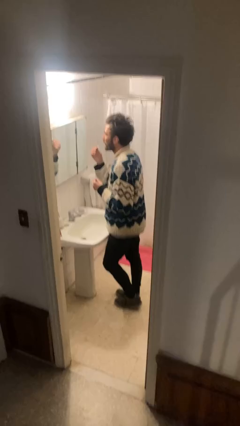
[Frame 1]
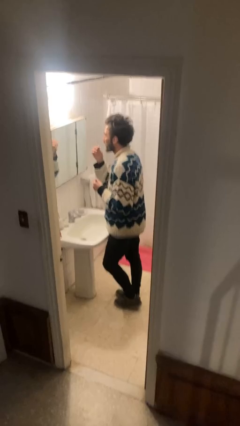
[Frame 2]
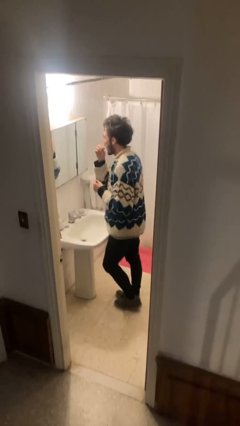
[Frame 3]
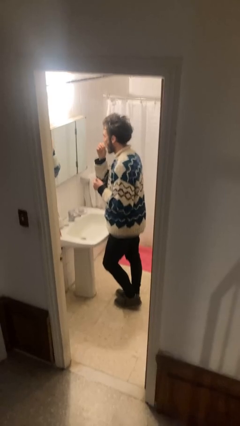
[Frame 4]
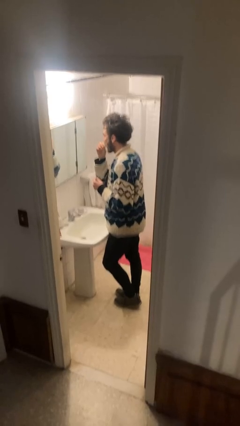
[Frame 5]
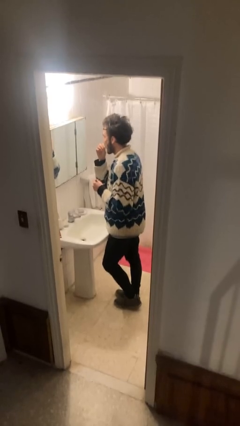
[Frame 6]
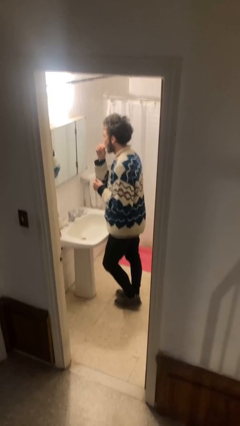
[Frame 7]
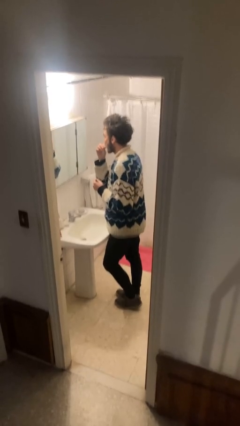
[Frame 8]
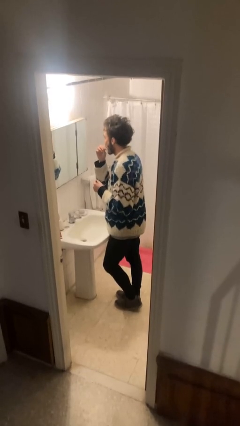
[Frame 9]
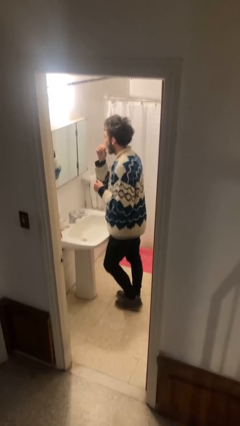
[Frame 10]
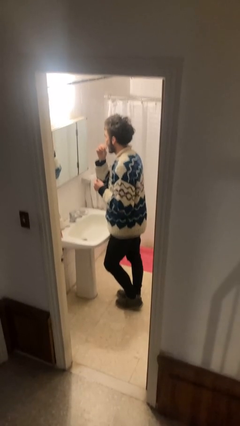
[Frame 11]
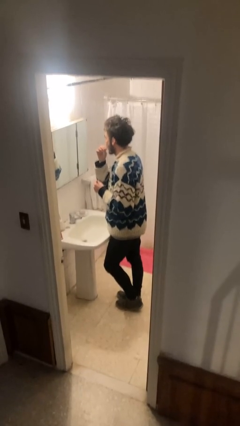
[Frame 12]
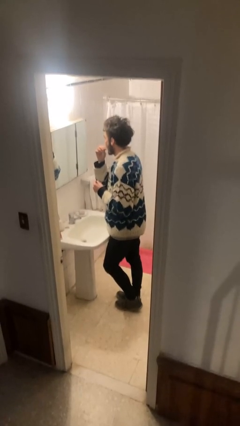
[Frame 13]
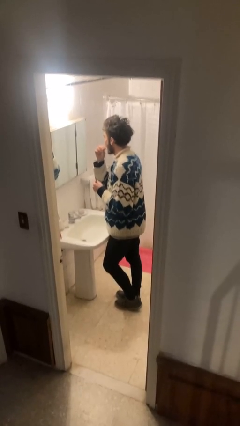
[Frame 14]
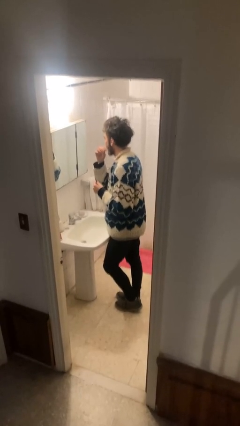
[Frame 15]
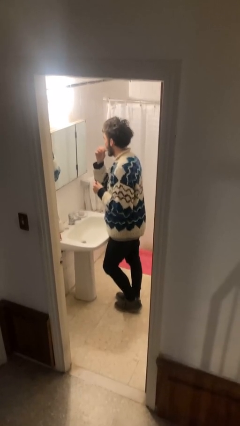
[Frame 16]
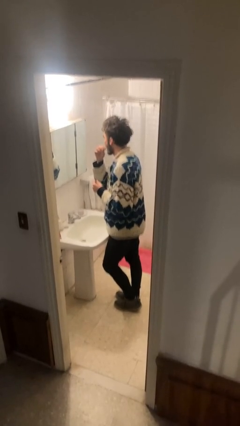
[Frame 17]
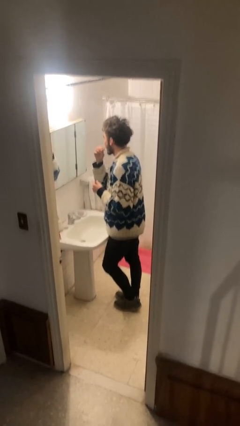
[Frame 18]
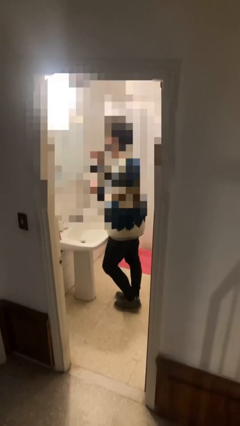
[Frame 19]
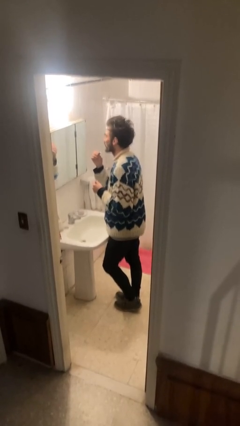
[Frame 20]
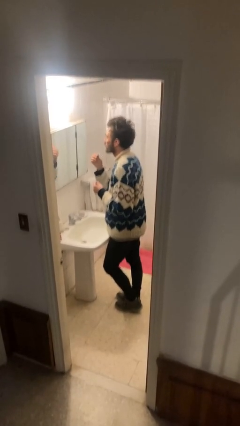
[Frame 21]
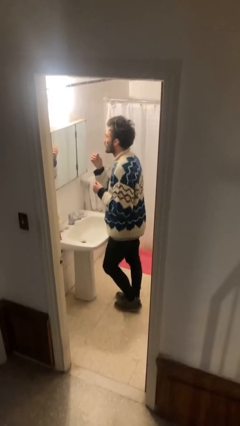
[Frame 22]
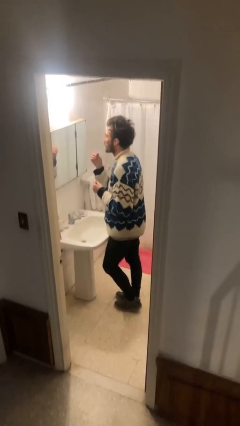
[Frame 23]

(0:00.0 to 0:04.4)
person applies lip makeup

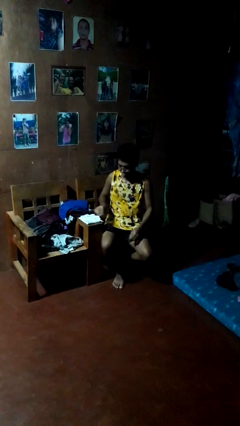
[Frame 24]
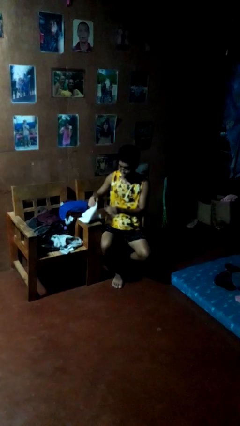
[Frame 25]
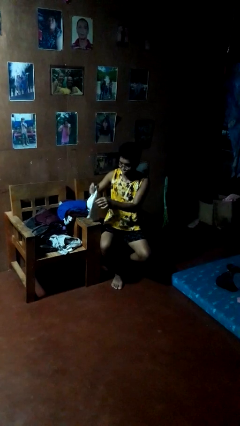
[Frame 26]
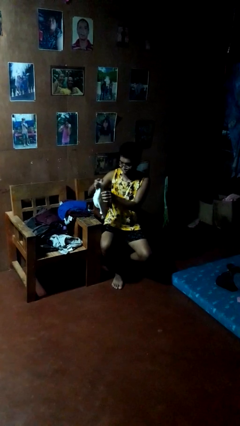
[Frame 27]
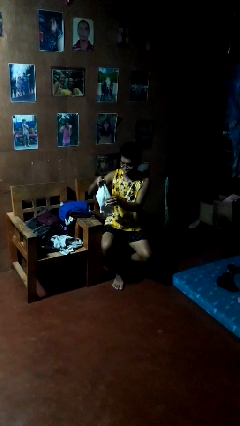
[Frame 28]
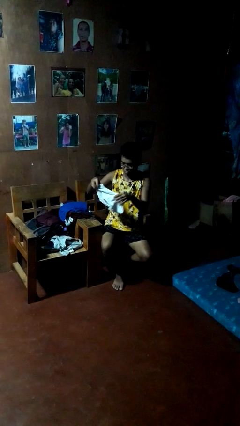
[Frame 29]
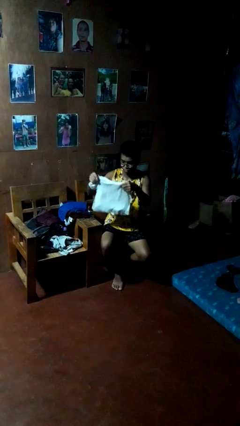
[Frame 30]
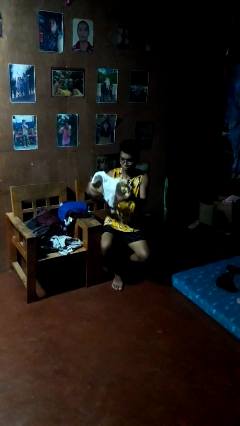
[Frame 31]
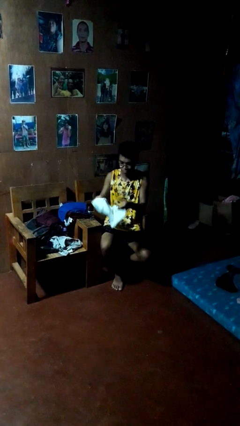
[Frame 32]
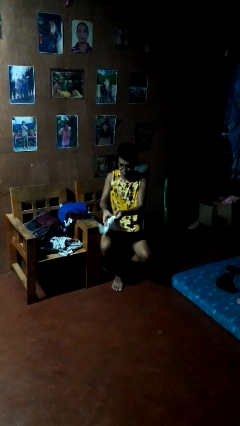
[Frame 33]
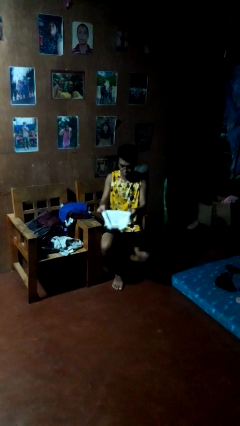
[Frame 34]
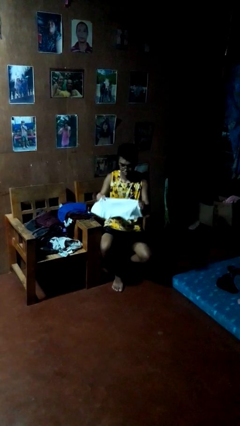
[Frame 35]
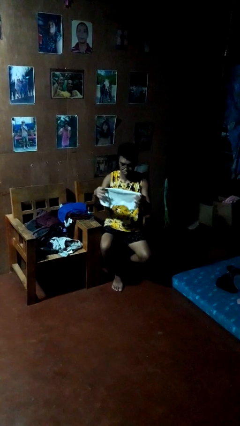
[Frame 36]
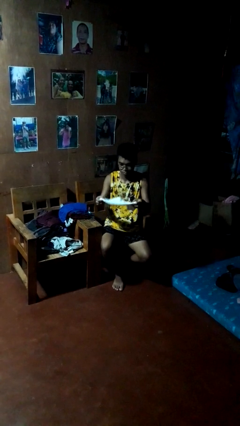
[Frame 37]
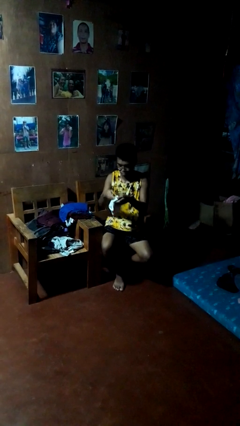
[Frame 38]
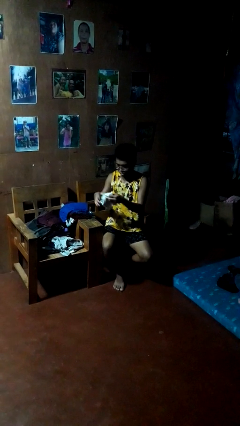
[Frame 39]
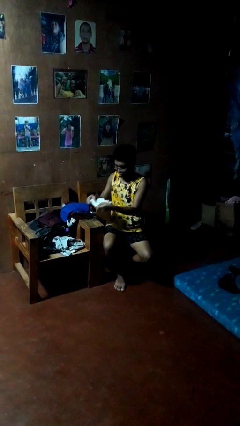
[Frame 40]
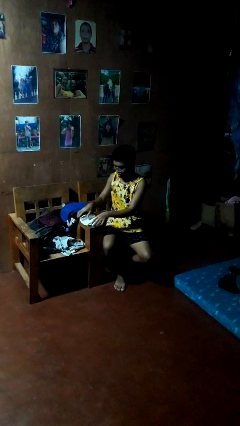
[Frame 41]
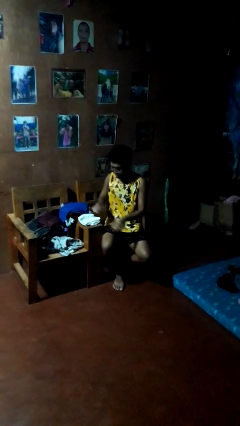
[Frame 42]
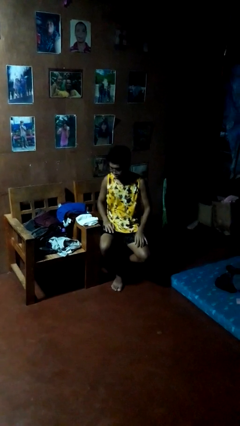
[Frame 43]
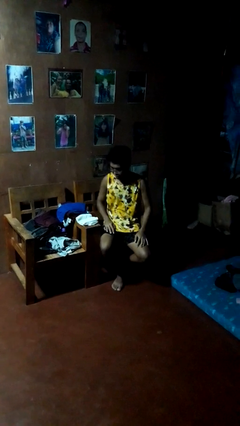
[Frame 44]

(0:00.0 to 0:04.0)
person folds shirt

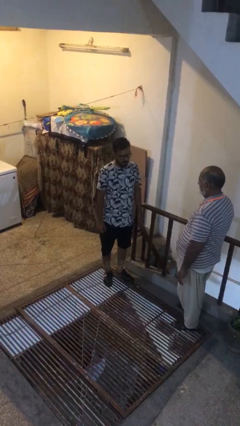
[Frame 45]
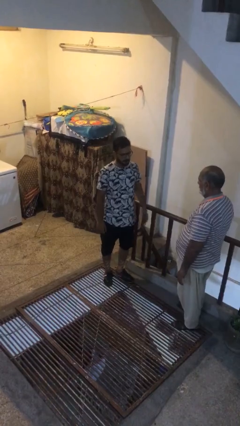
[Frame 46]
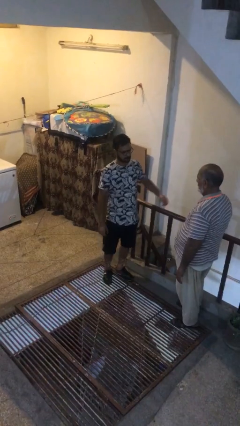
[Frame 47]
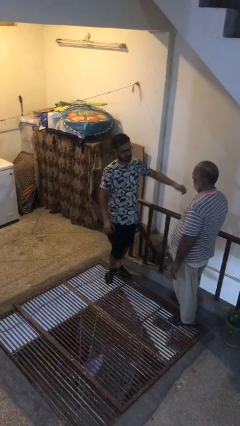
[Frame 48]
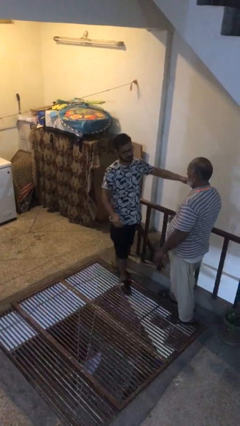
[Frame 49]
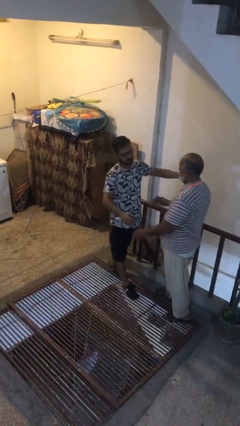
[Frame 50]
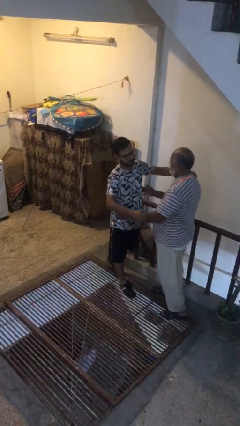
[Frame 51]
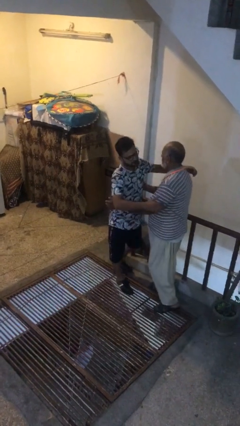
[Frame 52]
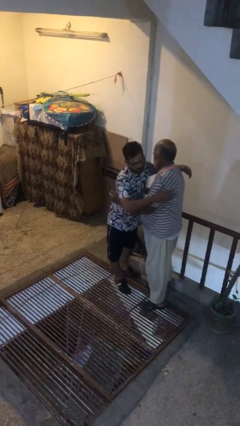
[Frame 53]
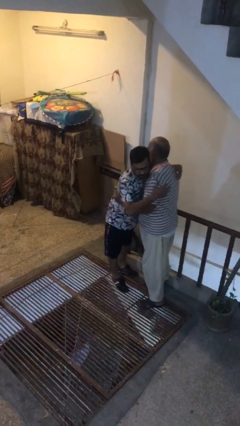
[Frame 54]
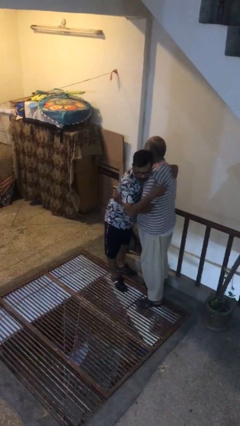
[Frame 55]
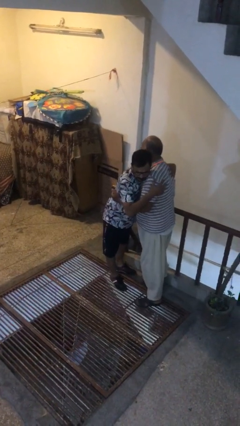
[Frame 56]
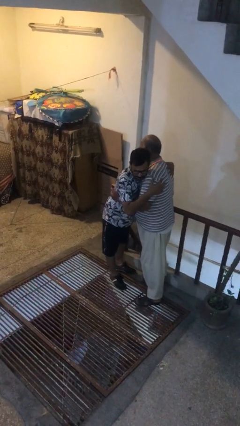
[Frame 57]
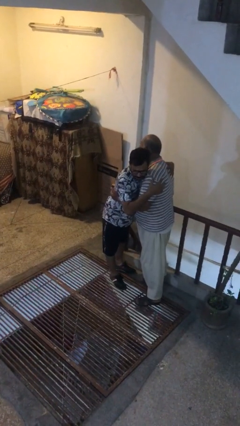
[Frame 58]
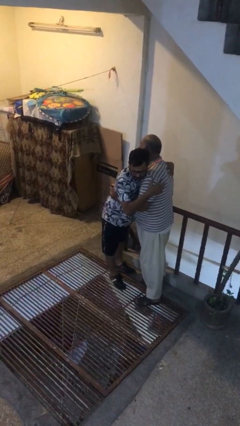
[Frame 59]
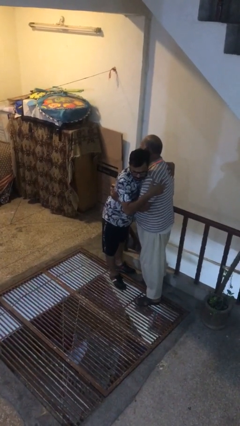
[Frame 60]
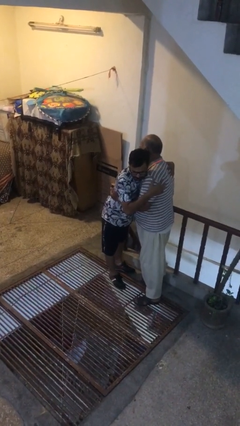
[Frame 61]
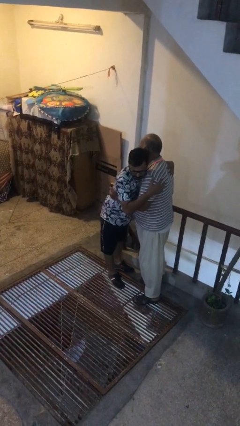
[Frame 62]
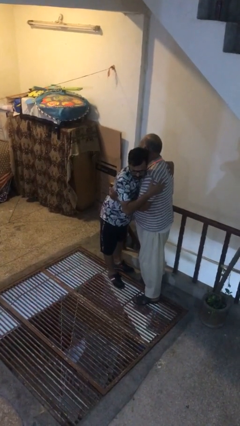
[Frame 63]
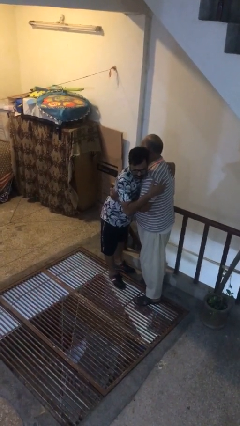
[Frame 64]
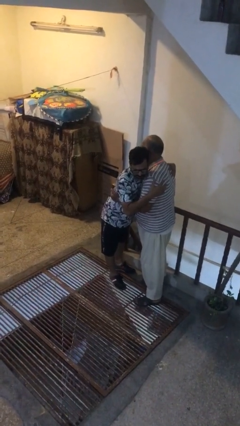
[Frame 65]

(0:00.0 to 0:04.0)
person embraces person

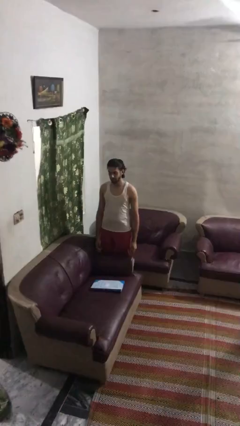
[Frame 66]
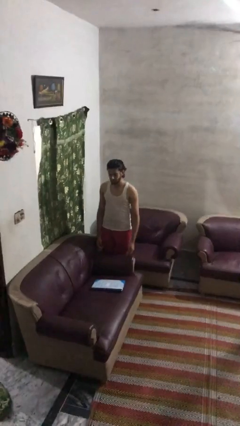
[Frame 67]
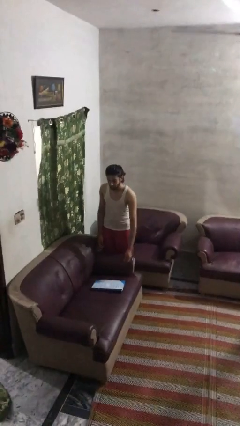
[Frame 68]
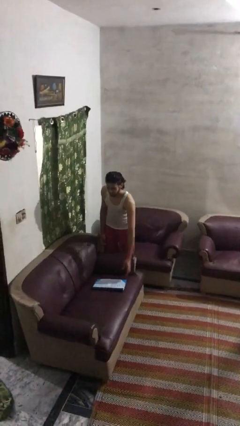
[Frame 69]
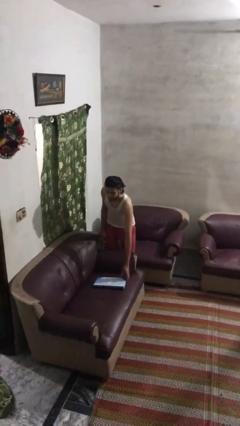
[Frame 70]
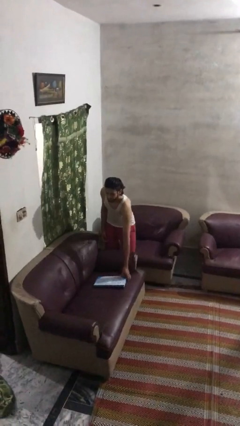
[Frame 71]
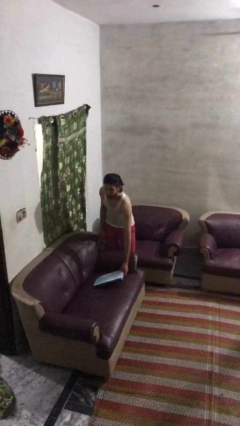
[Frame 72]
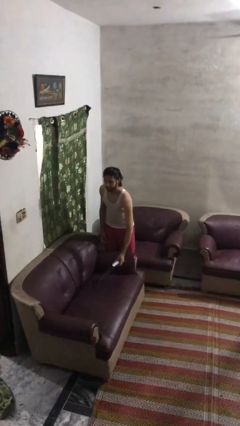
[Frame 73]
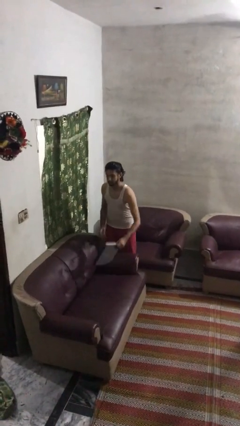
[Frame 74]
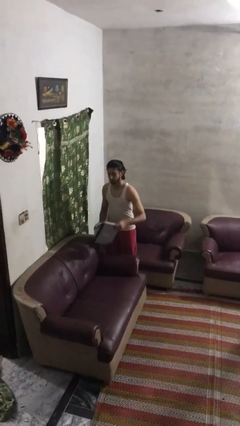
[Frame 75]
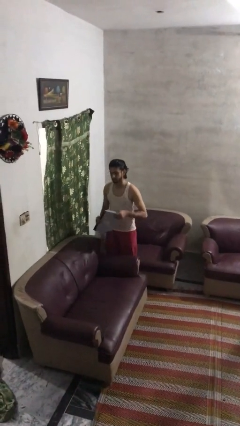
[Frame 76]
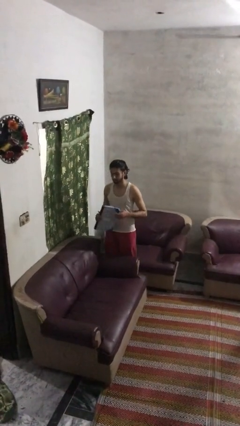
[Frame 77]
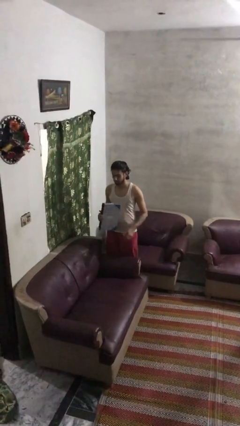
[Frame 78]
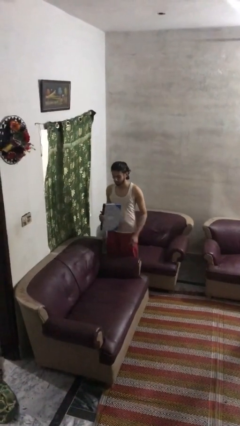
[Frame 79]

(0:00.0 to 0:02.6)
person picks up object from couch

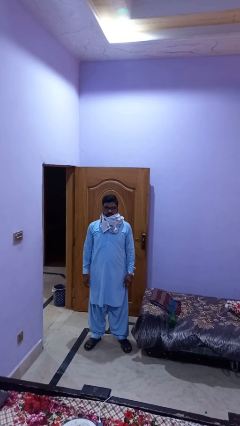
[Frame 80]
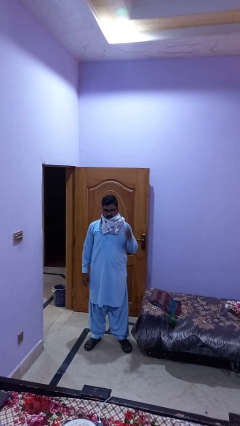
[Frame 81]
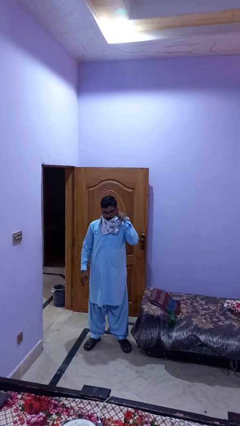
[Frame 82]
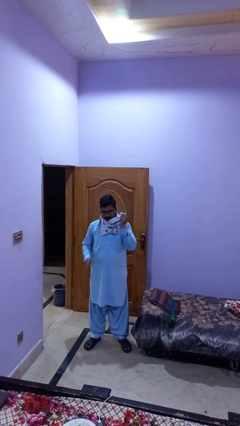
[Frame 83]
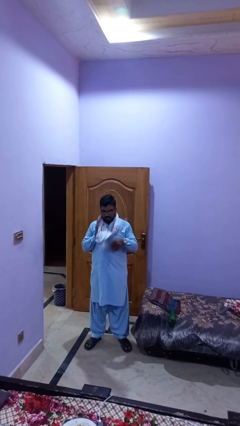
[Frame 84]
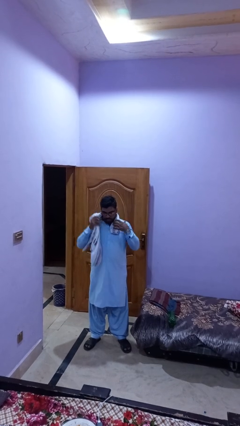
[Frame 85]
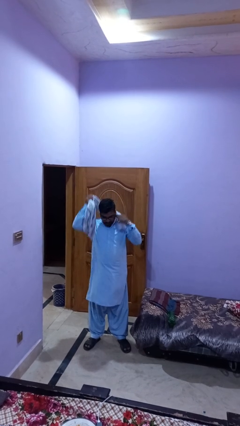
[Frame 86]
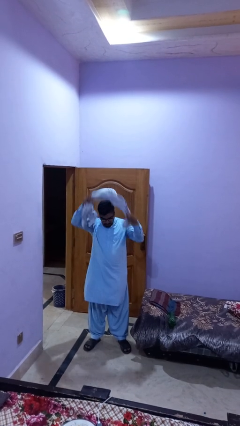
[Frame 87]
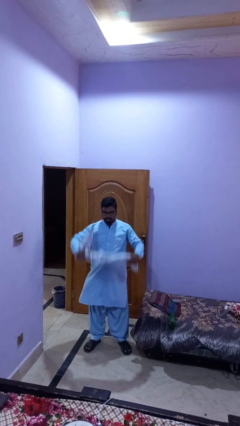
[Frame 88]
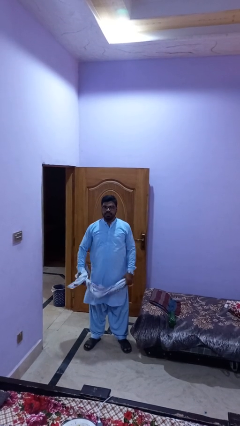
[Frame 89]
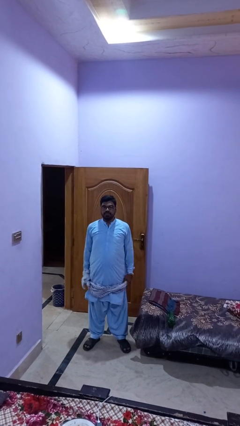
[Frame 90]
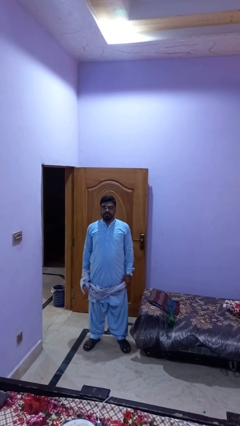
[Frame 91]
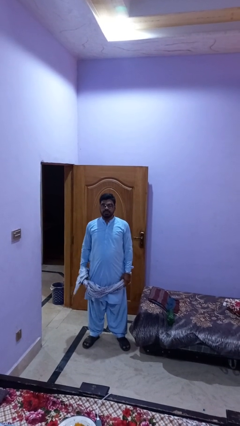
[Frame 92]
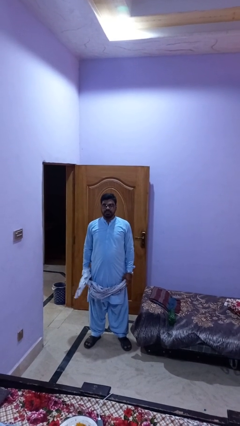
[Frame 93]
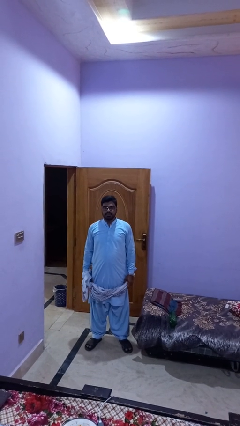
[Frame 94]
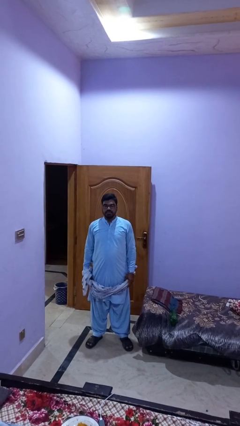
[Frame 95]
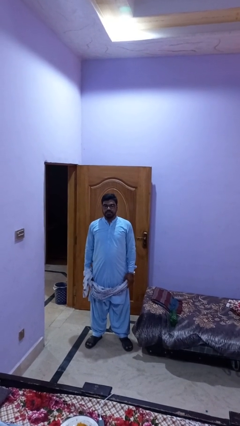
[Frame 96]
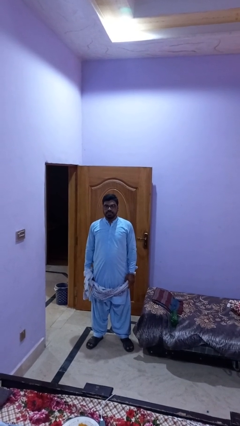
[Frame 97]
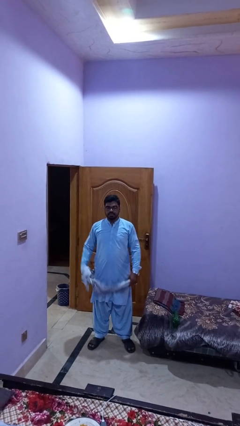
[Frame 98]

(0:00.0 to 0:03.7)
person takes off scarf
